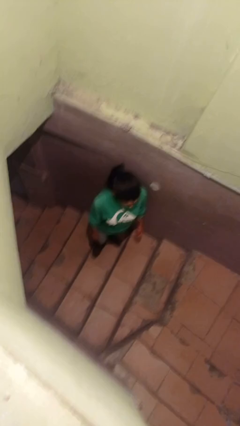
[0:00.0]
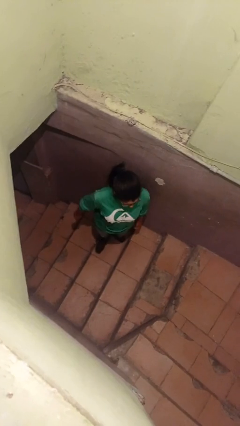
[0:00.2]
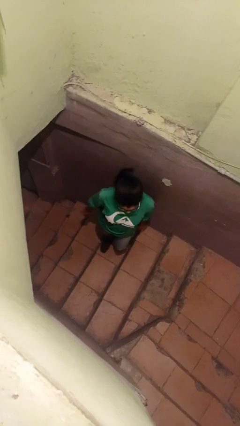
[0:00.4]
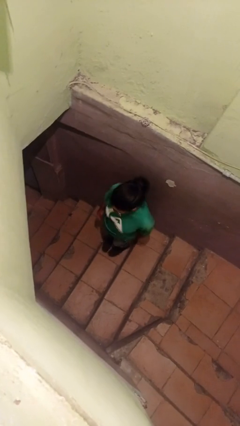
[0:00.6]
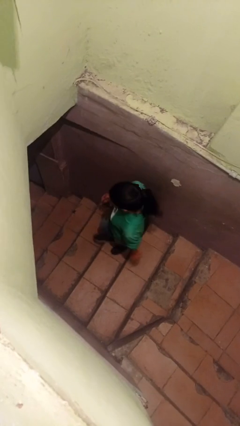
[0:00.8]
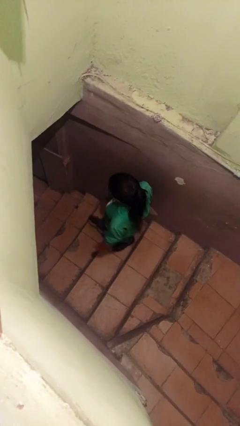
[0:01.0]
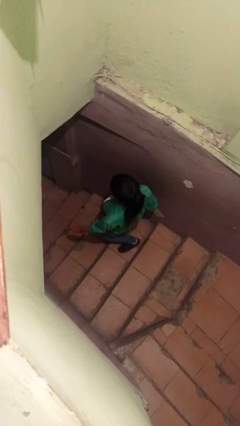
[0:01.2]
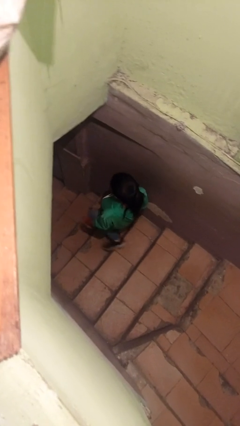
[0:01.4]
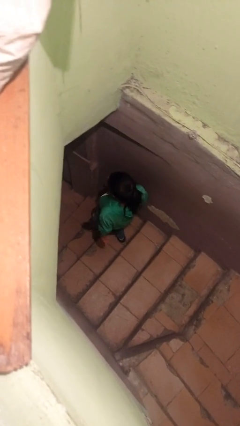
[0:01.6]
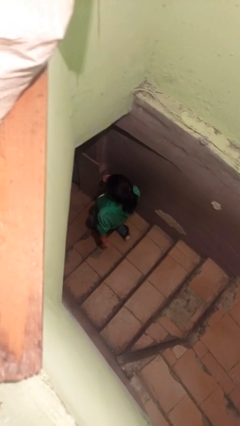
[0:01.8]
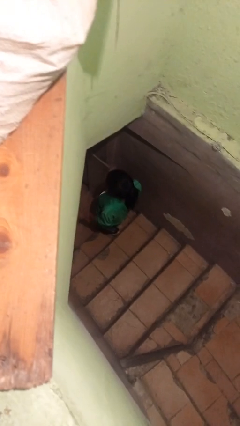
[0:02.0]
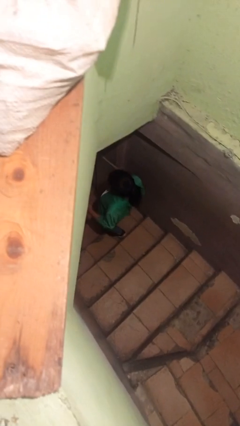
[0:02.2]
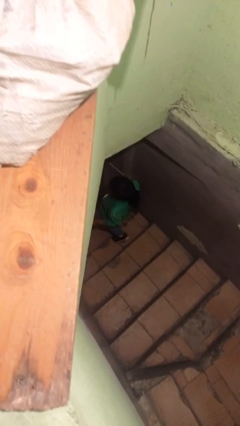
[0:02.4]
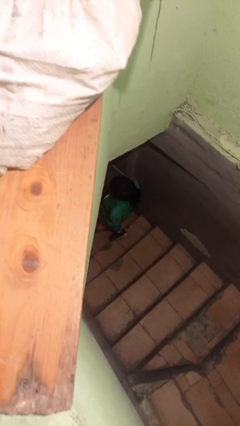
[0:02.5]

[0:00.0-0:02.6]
person climbs down stairs

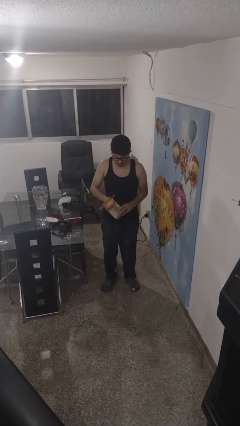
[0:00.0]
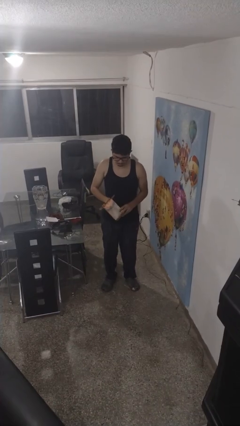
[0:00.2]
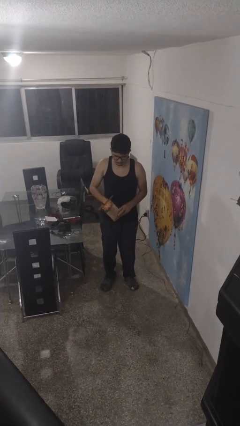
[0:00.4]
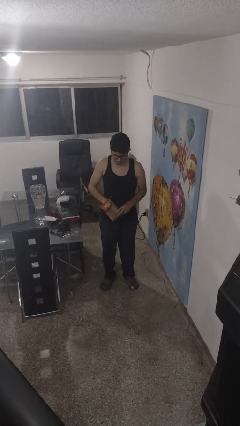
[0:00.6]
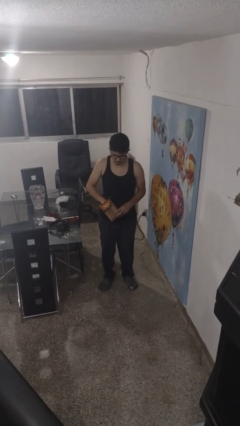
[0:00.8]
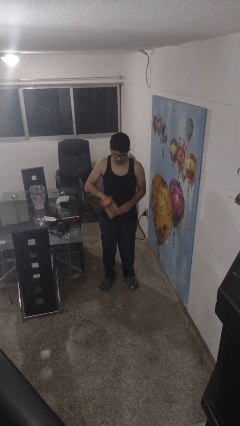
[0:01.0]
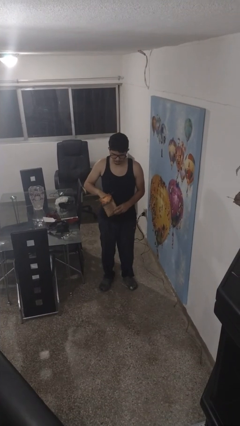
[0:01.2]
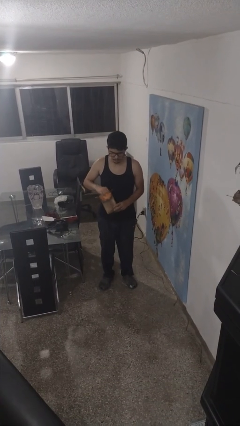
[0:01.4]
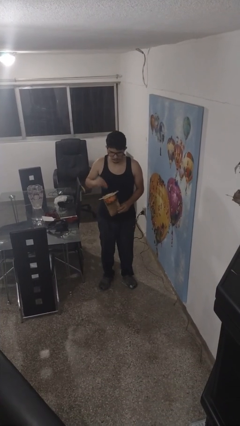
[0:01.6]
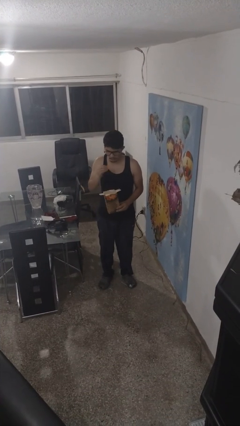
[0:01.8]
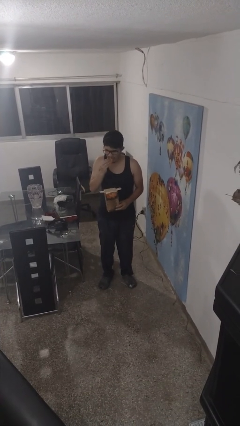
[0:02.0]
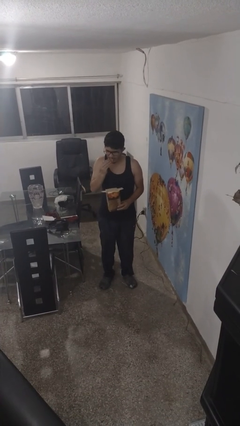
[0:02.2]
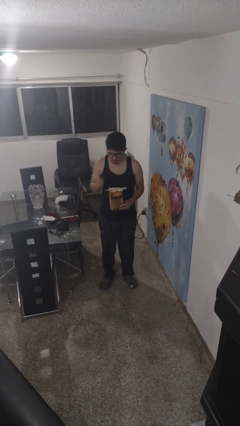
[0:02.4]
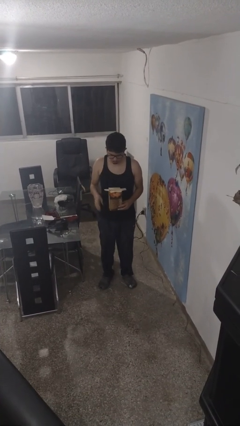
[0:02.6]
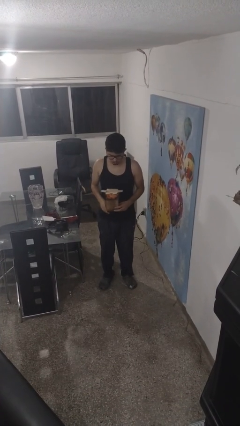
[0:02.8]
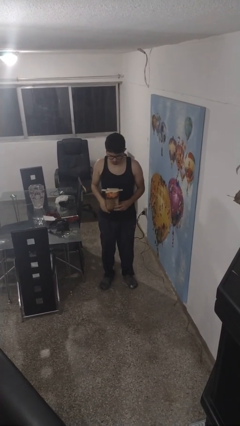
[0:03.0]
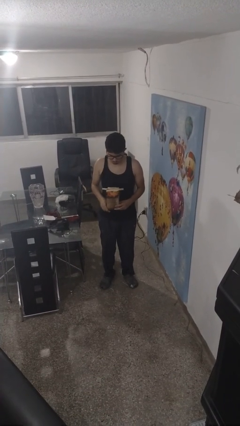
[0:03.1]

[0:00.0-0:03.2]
person eats snack from bag

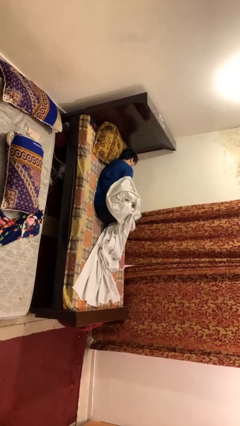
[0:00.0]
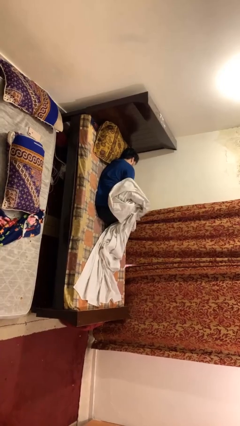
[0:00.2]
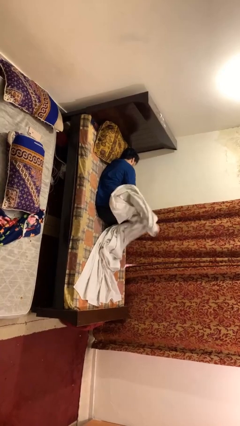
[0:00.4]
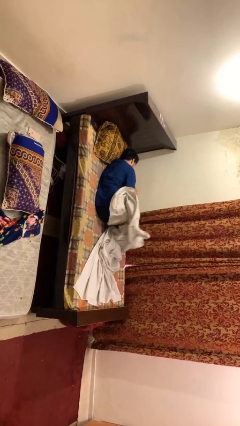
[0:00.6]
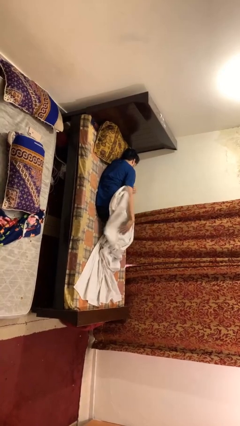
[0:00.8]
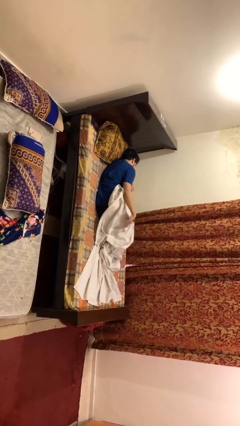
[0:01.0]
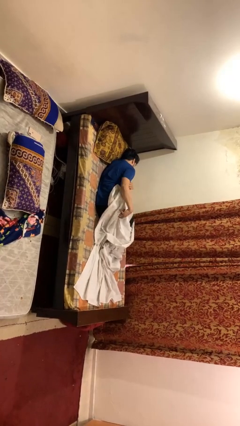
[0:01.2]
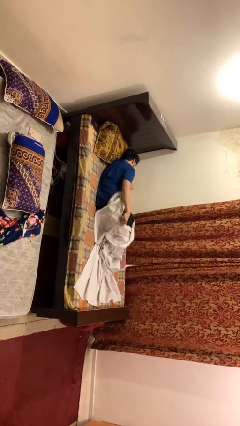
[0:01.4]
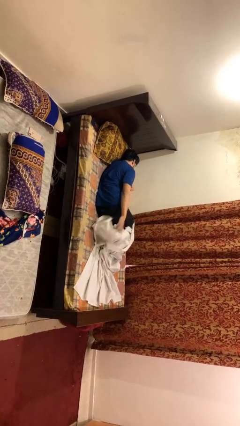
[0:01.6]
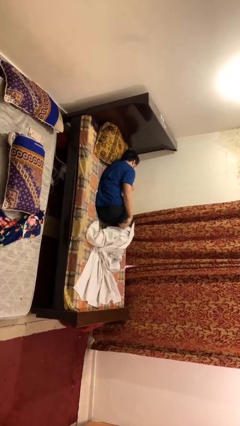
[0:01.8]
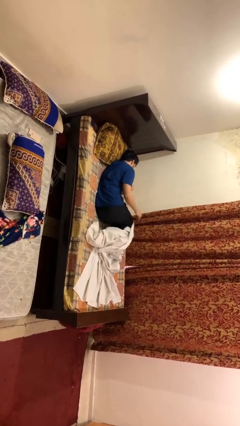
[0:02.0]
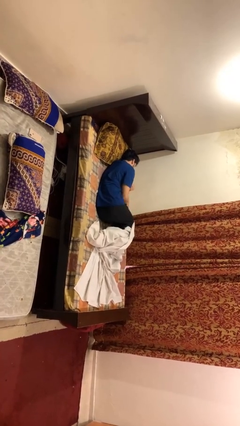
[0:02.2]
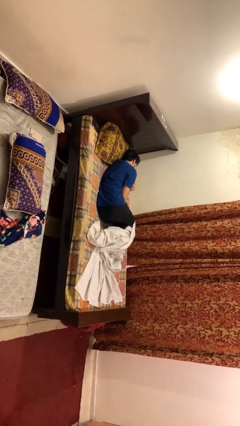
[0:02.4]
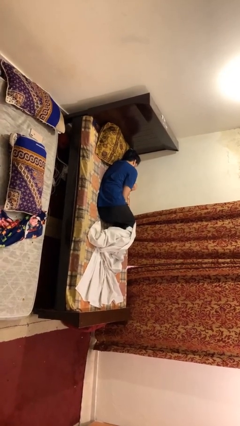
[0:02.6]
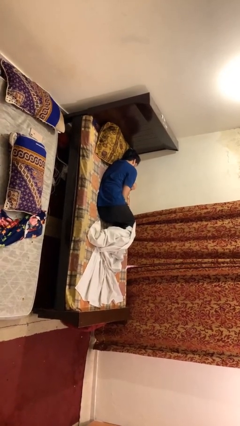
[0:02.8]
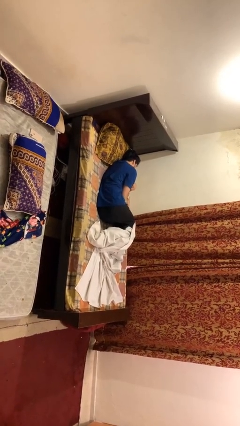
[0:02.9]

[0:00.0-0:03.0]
person uncovers with bedsheets

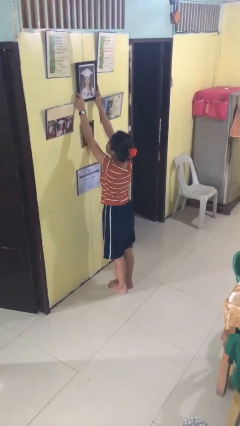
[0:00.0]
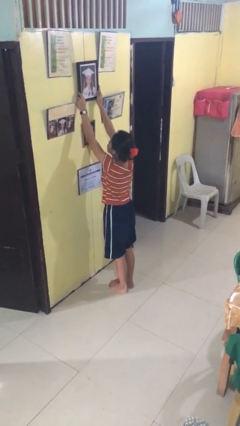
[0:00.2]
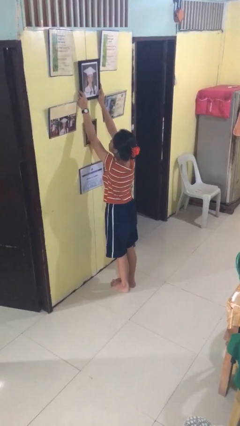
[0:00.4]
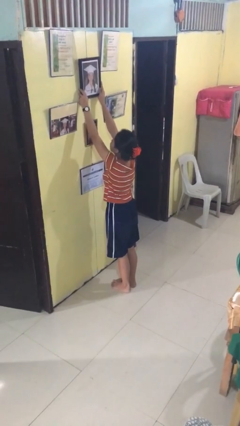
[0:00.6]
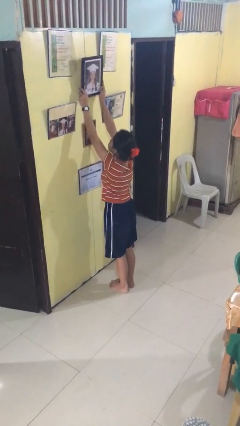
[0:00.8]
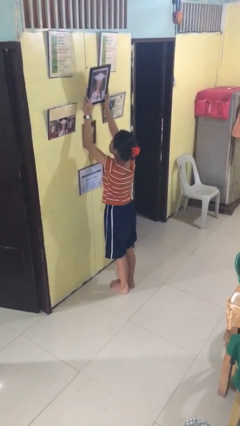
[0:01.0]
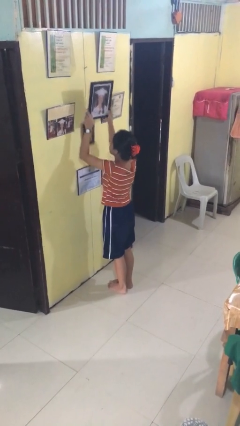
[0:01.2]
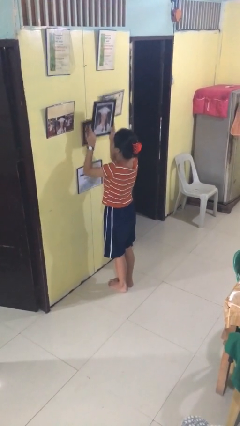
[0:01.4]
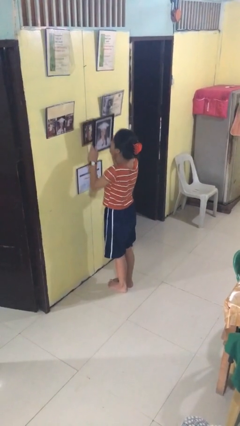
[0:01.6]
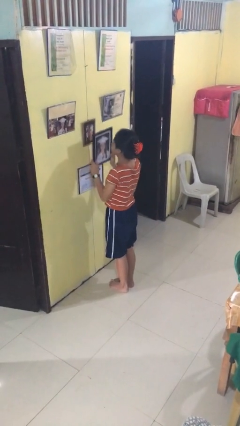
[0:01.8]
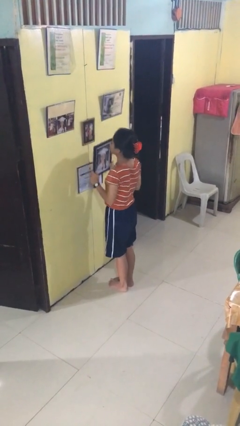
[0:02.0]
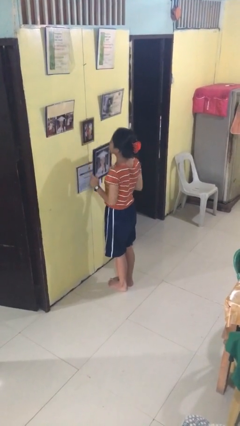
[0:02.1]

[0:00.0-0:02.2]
person takes down picture frame

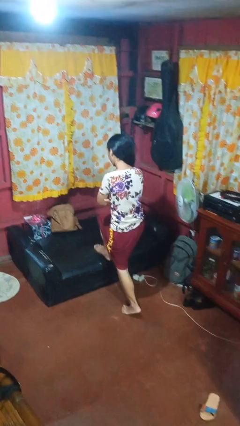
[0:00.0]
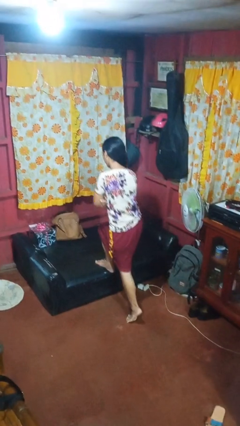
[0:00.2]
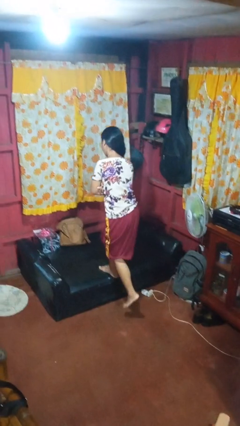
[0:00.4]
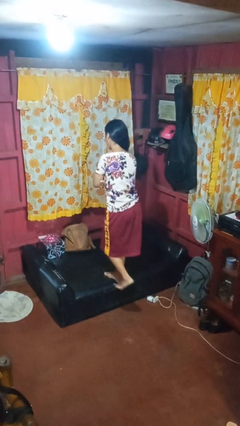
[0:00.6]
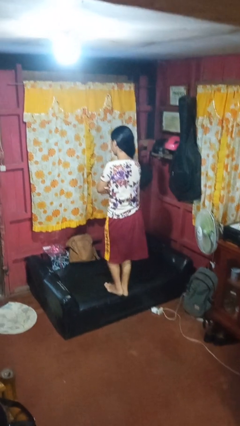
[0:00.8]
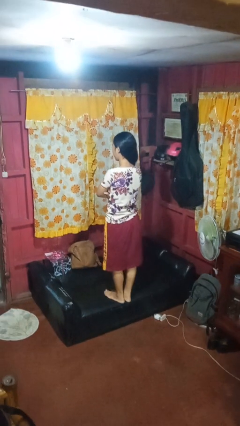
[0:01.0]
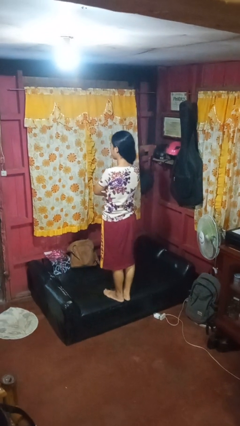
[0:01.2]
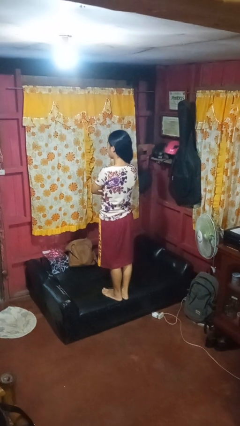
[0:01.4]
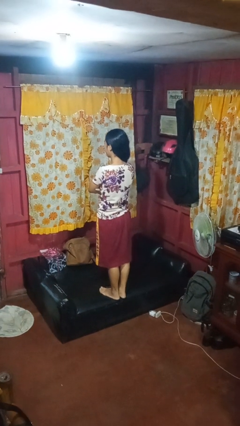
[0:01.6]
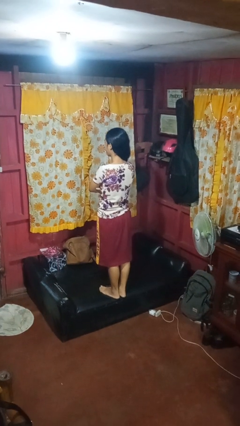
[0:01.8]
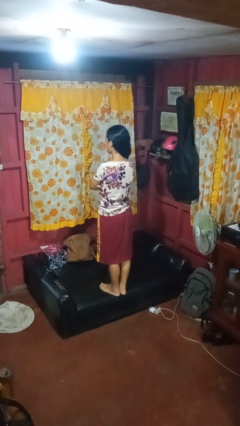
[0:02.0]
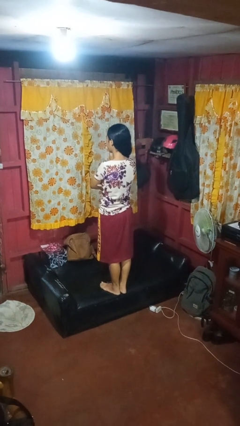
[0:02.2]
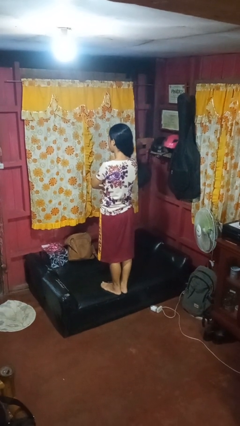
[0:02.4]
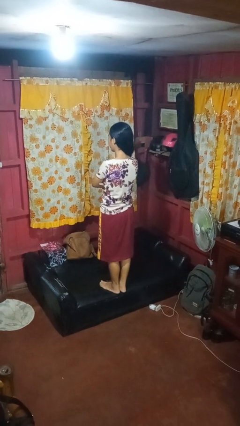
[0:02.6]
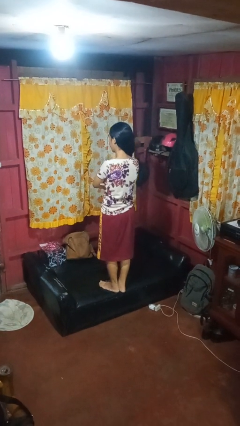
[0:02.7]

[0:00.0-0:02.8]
person climbs on couch

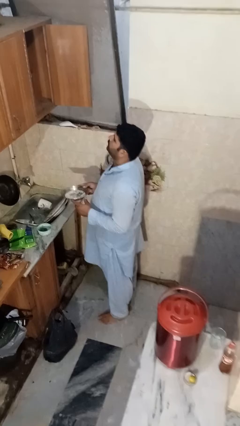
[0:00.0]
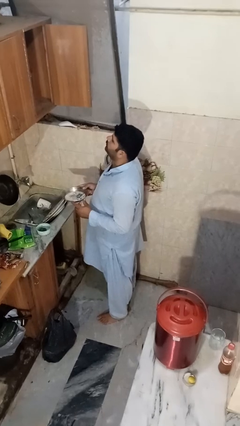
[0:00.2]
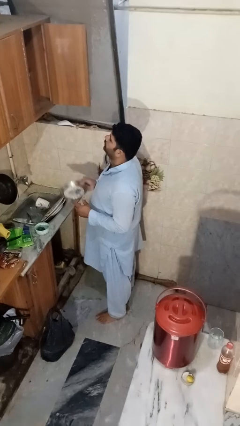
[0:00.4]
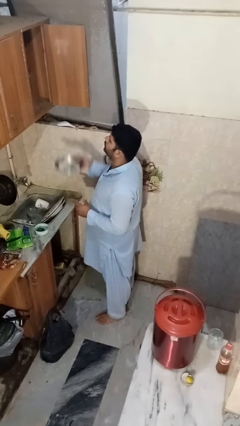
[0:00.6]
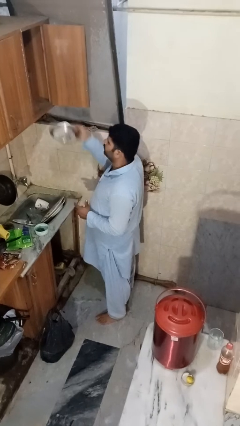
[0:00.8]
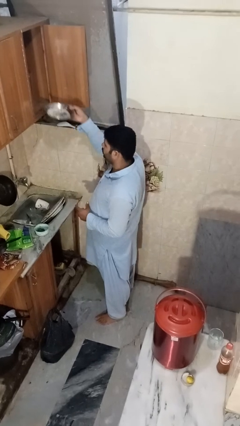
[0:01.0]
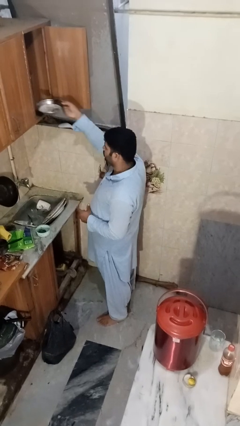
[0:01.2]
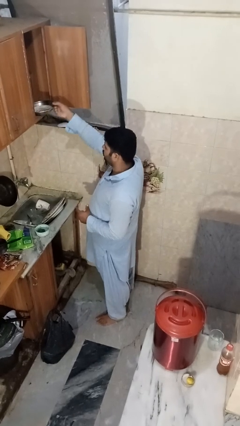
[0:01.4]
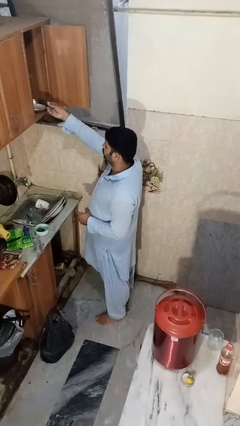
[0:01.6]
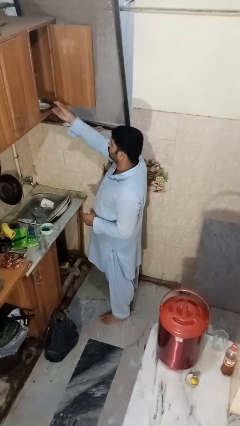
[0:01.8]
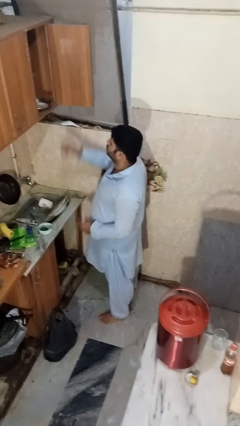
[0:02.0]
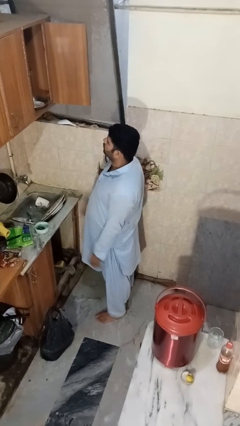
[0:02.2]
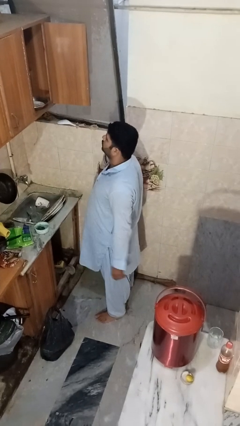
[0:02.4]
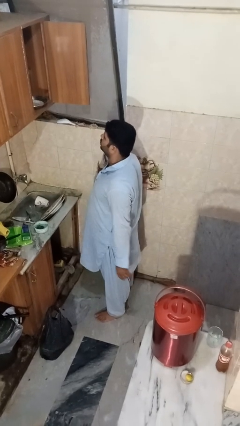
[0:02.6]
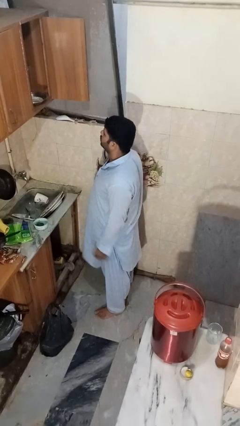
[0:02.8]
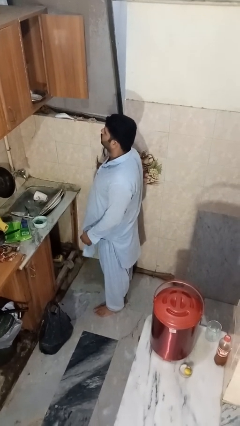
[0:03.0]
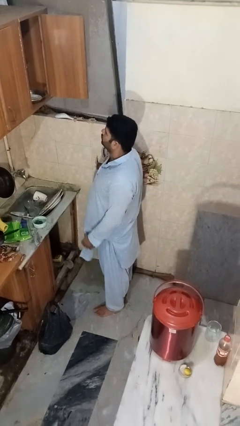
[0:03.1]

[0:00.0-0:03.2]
person puts object in cabinet

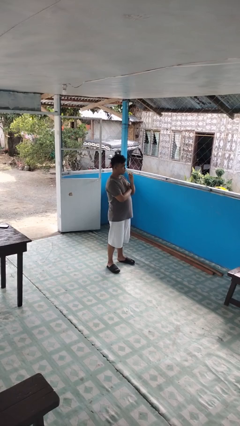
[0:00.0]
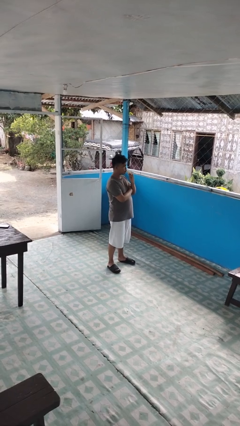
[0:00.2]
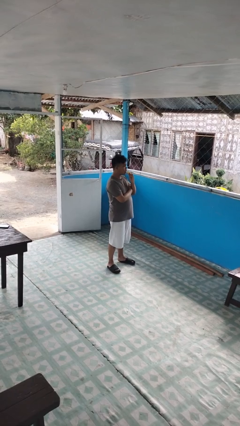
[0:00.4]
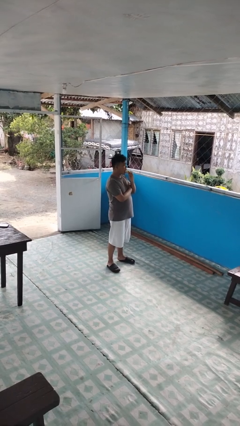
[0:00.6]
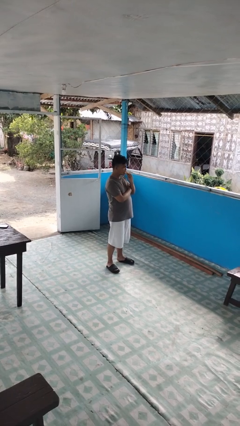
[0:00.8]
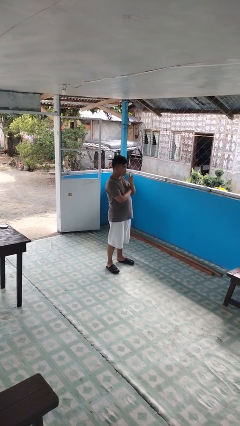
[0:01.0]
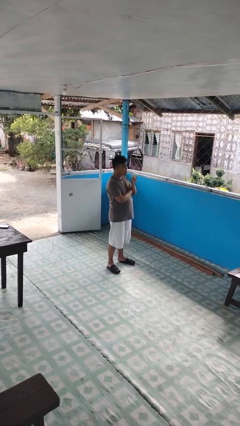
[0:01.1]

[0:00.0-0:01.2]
person eats banana
